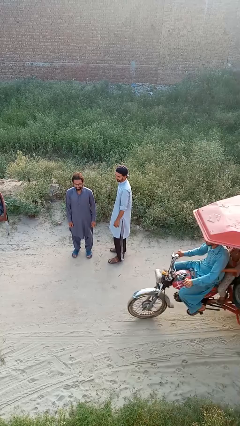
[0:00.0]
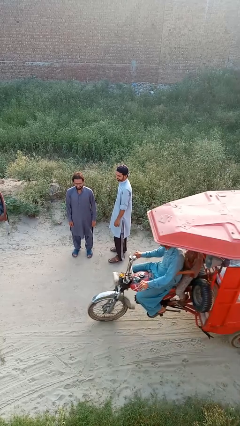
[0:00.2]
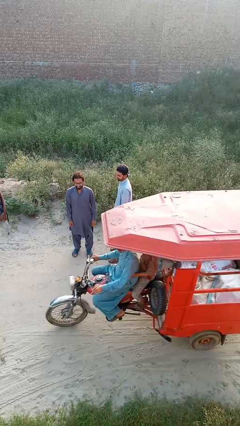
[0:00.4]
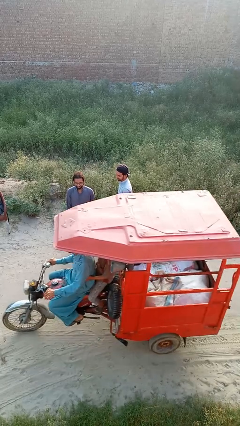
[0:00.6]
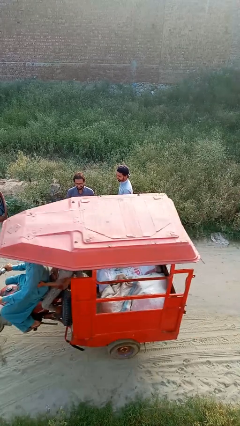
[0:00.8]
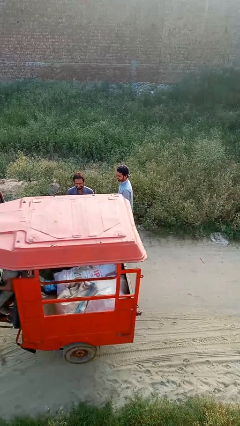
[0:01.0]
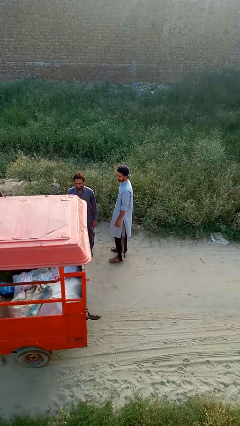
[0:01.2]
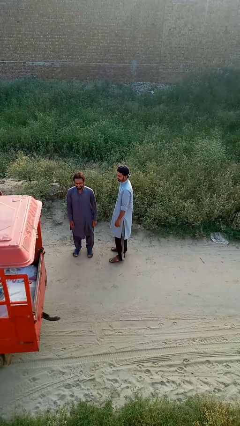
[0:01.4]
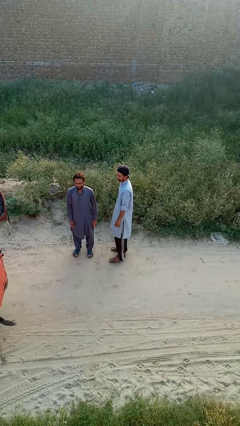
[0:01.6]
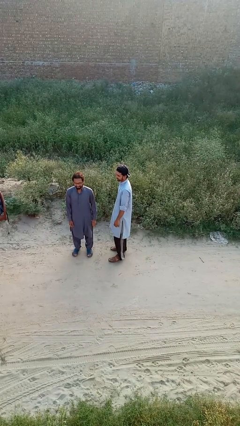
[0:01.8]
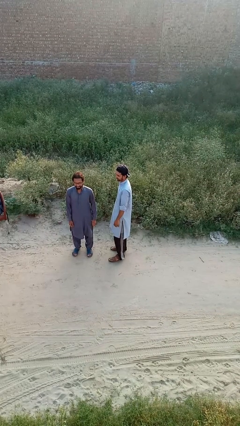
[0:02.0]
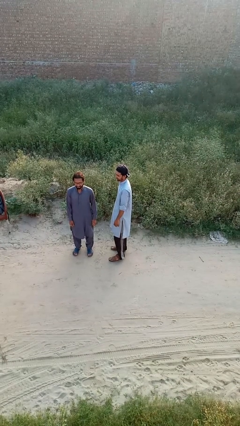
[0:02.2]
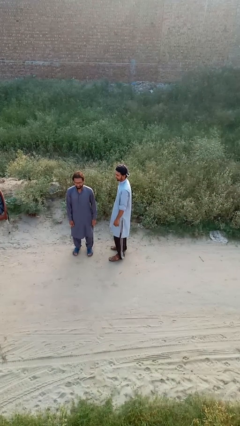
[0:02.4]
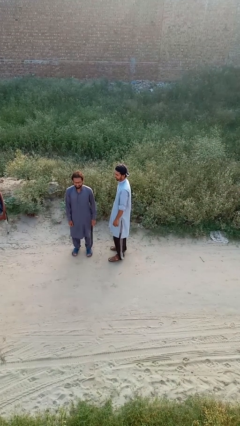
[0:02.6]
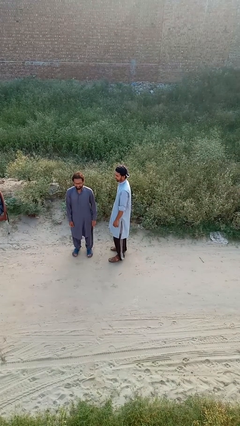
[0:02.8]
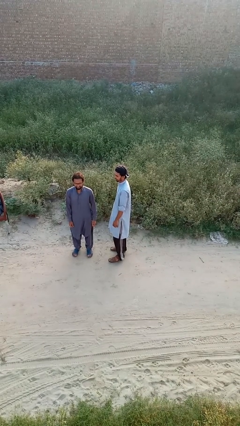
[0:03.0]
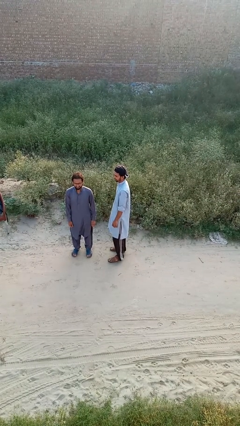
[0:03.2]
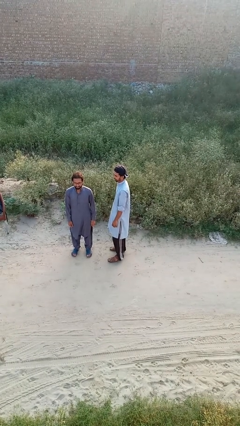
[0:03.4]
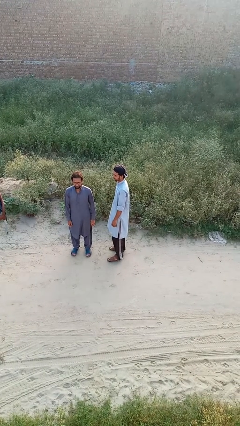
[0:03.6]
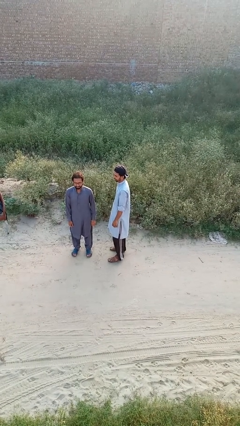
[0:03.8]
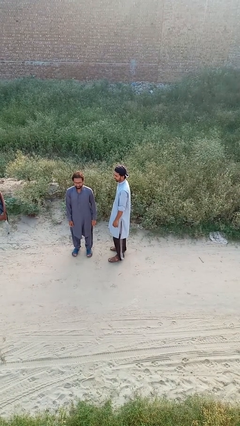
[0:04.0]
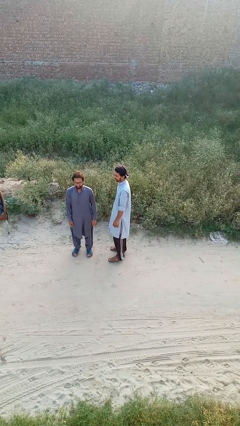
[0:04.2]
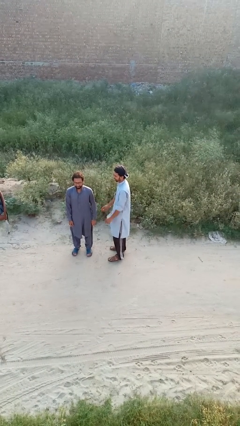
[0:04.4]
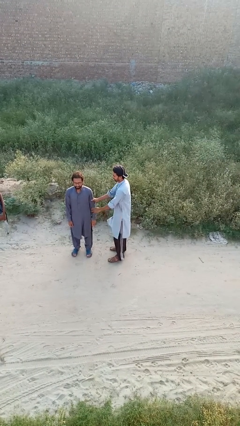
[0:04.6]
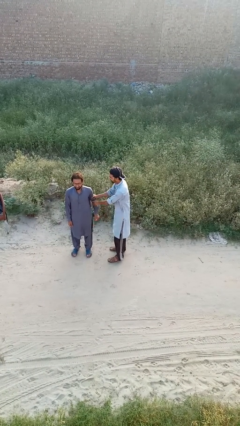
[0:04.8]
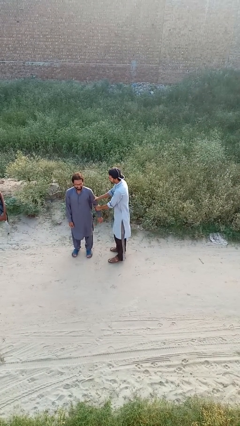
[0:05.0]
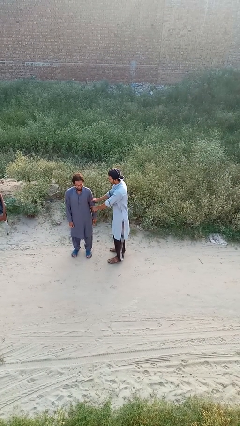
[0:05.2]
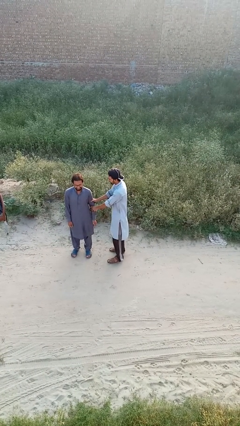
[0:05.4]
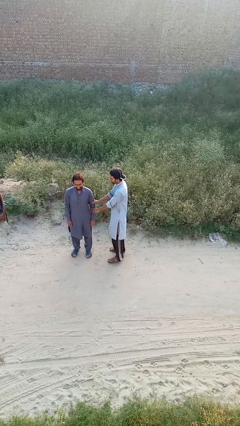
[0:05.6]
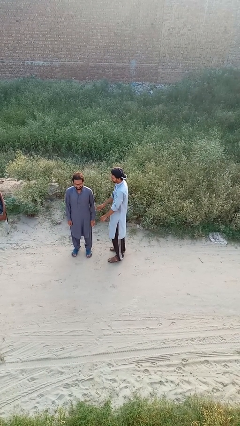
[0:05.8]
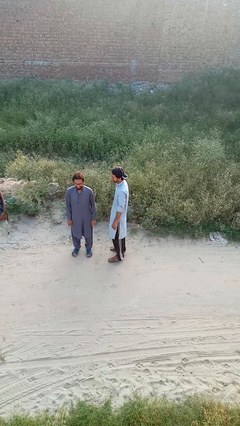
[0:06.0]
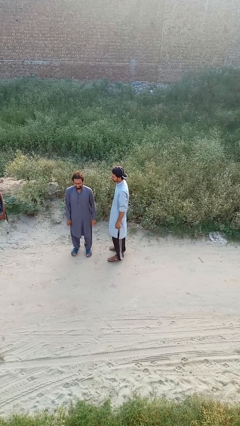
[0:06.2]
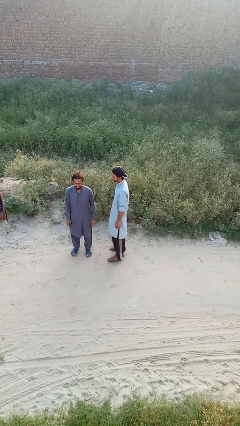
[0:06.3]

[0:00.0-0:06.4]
person grabs person by forearm

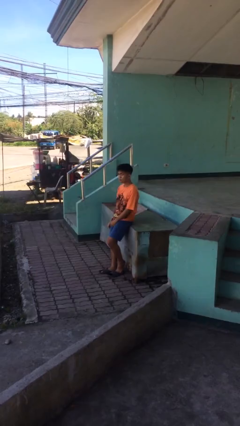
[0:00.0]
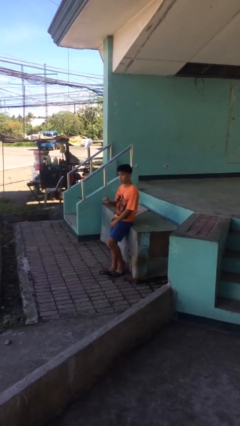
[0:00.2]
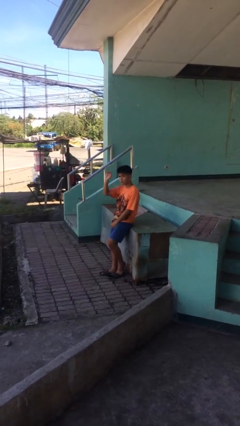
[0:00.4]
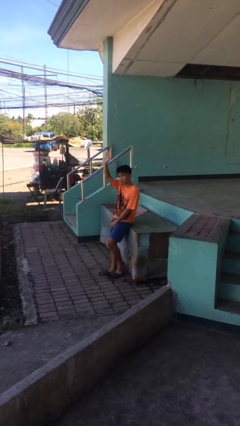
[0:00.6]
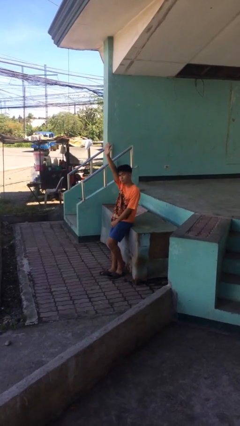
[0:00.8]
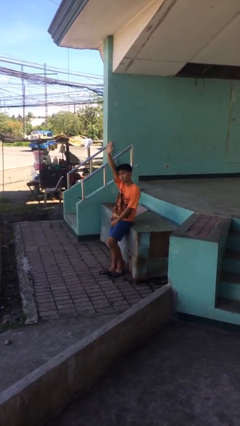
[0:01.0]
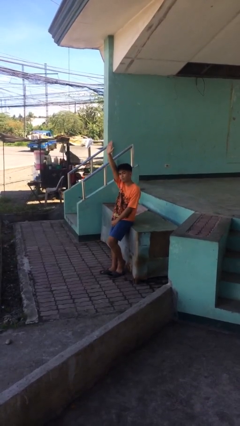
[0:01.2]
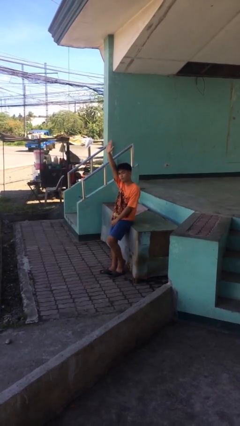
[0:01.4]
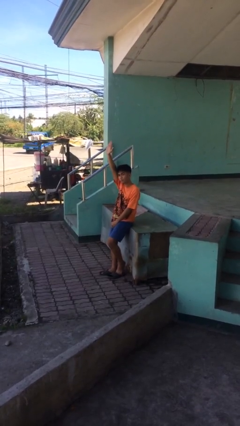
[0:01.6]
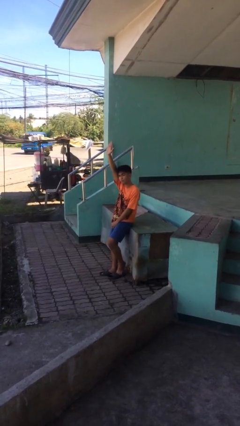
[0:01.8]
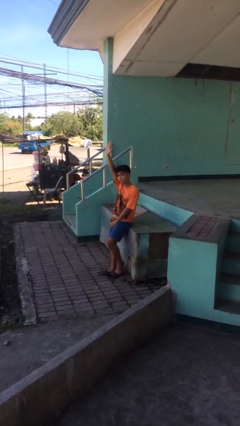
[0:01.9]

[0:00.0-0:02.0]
person gestures raise hand

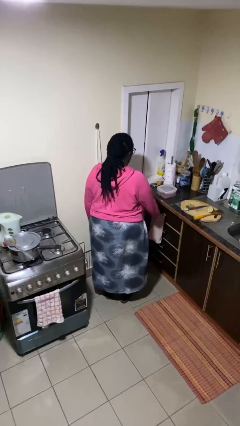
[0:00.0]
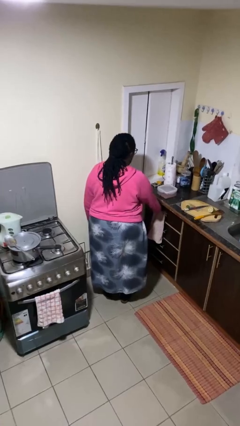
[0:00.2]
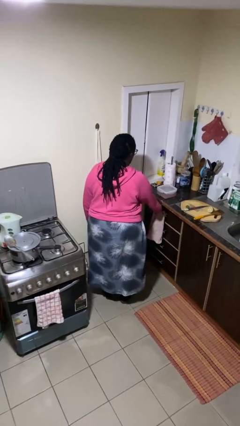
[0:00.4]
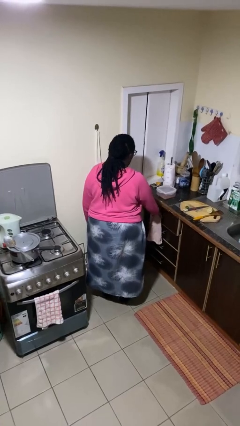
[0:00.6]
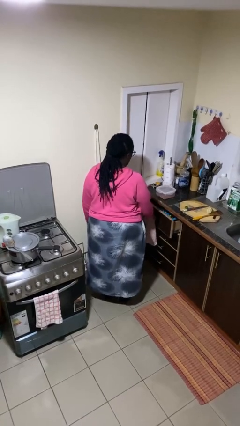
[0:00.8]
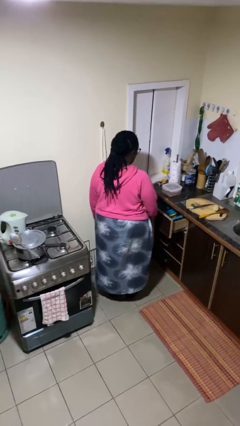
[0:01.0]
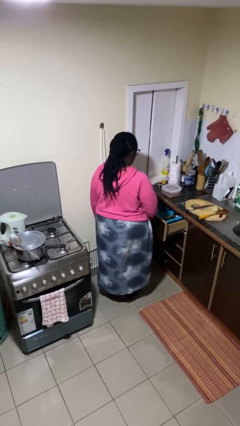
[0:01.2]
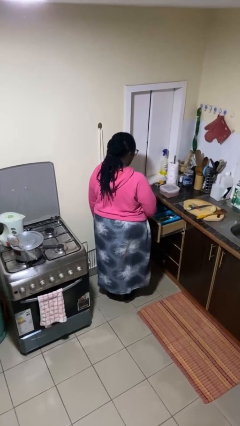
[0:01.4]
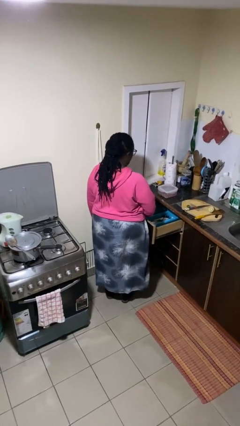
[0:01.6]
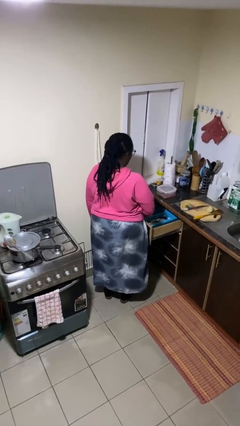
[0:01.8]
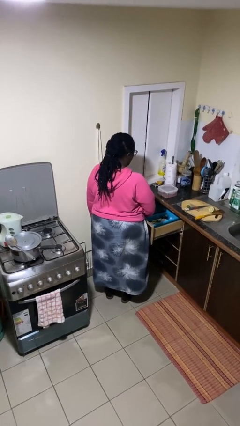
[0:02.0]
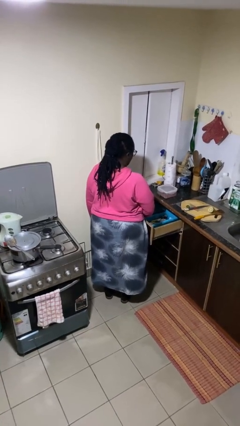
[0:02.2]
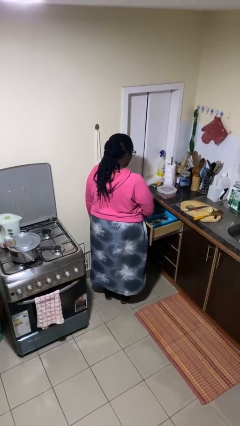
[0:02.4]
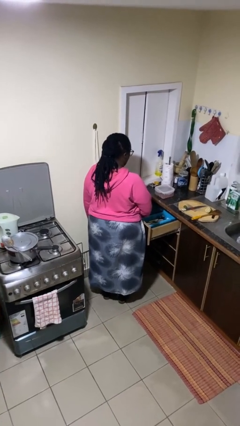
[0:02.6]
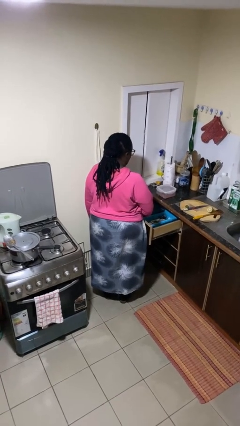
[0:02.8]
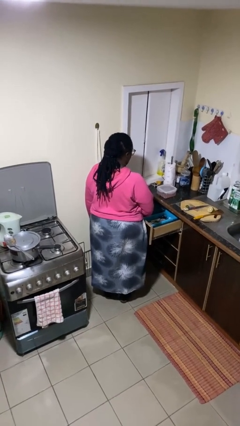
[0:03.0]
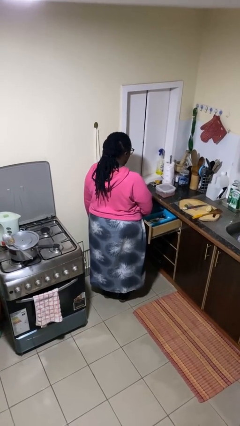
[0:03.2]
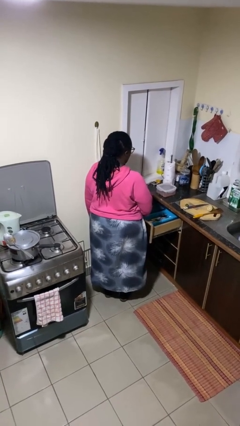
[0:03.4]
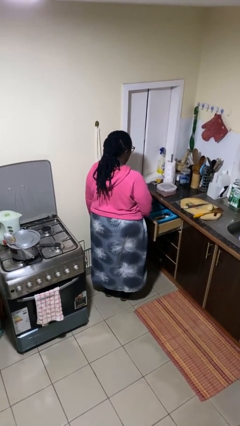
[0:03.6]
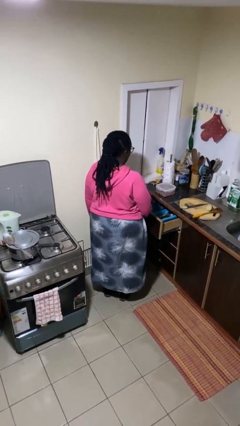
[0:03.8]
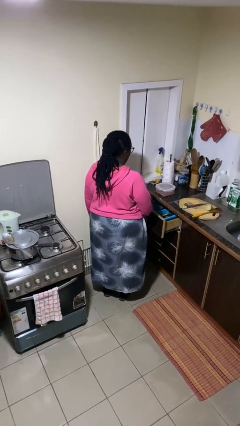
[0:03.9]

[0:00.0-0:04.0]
person opens kitchen drawer

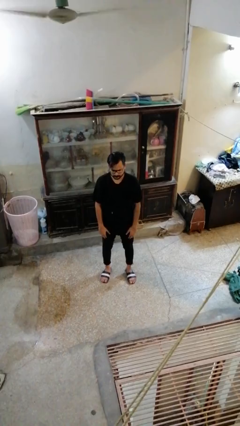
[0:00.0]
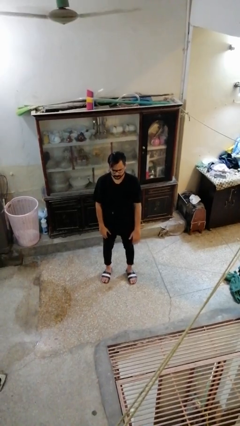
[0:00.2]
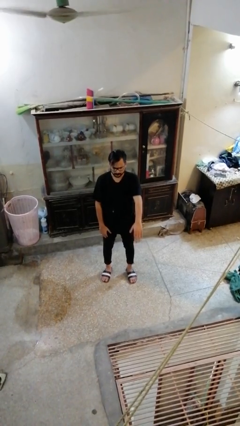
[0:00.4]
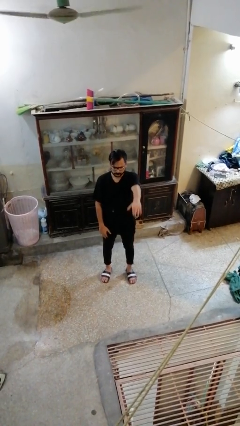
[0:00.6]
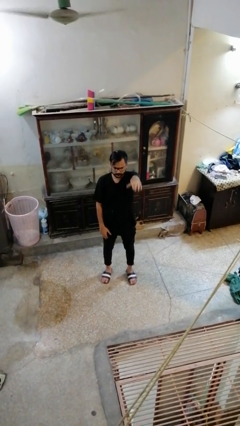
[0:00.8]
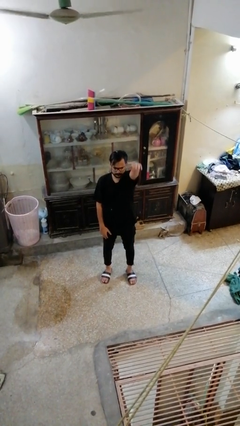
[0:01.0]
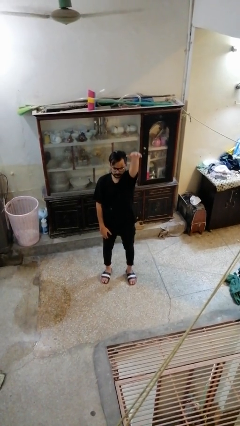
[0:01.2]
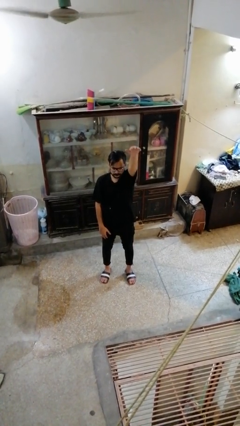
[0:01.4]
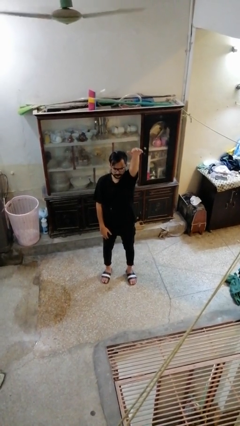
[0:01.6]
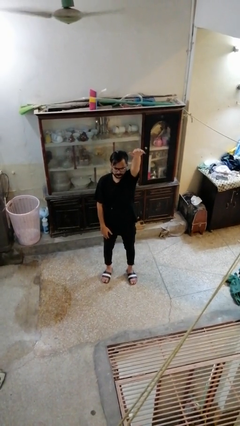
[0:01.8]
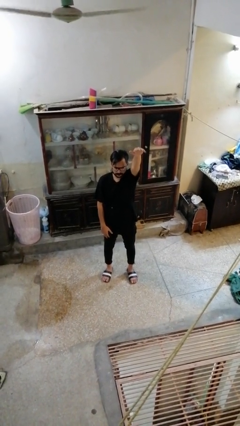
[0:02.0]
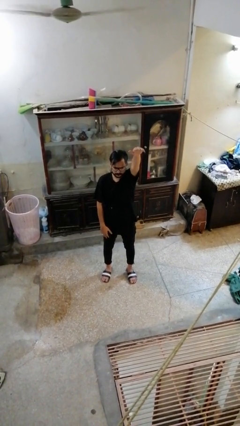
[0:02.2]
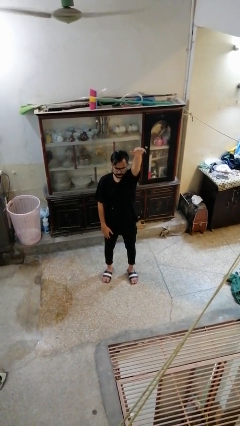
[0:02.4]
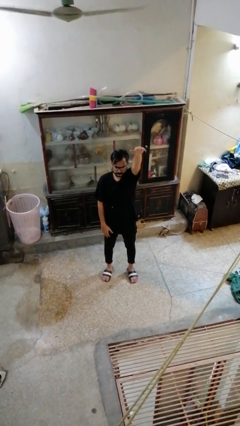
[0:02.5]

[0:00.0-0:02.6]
person gestures swipe up

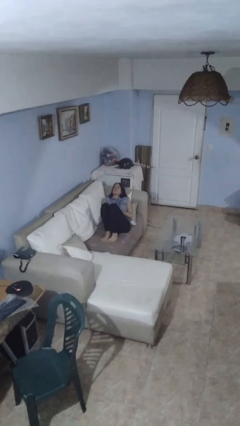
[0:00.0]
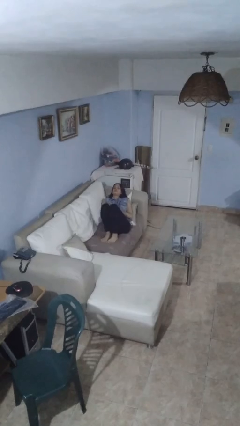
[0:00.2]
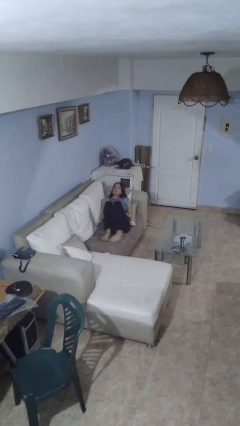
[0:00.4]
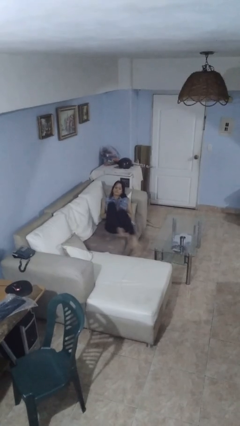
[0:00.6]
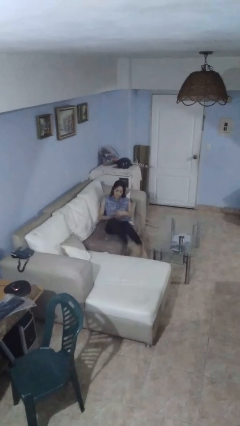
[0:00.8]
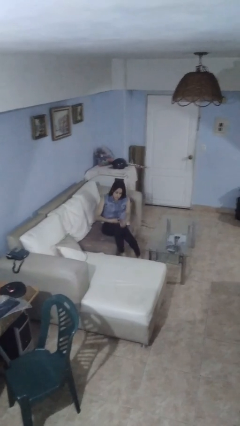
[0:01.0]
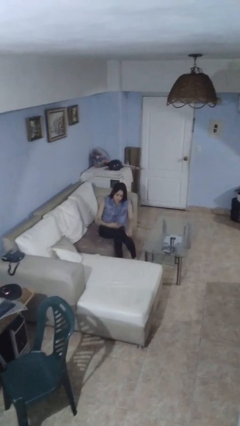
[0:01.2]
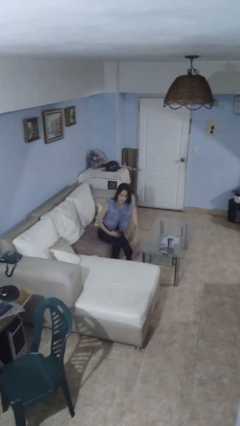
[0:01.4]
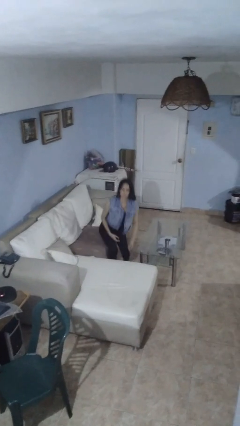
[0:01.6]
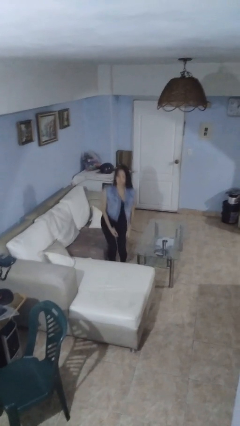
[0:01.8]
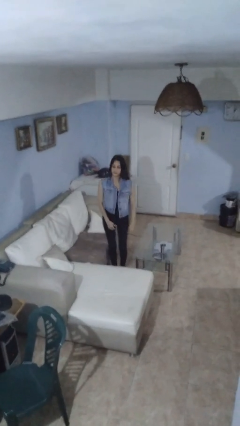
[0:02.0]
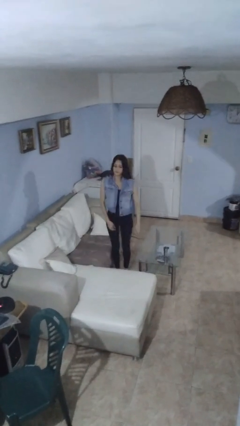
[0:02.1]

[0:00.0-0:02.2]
person stands up

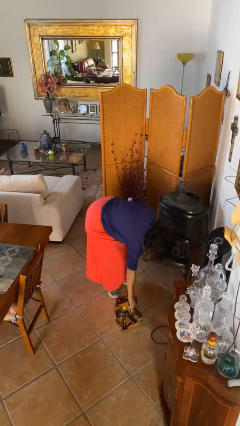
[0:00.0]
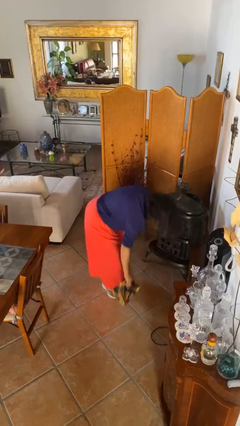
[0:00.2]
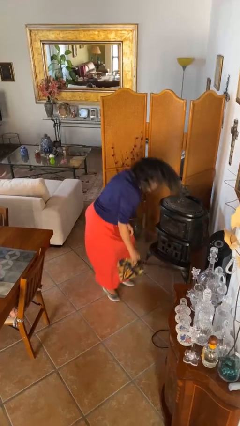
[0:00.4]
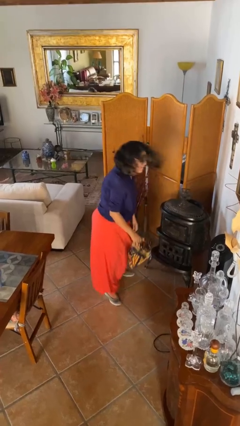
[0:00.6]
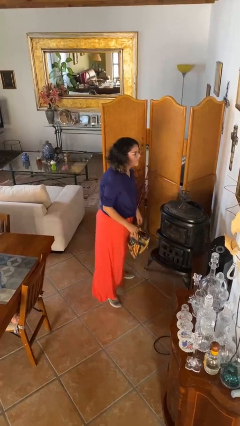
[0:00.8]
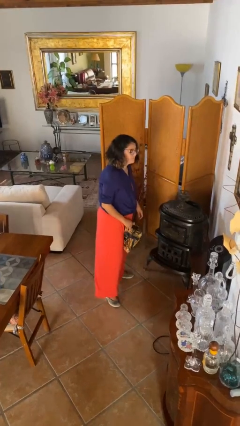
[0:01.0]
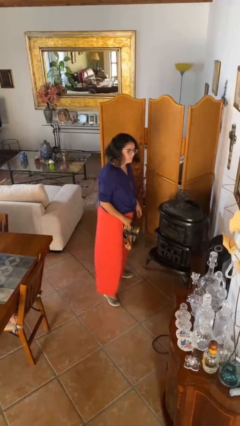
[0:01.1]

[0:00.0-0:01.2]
person picks up object from floor
